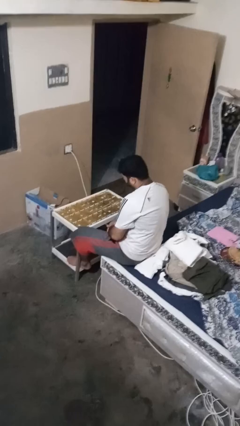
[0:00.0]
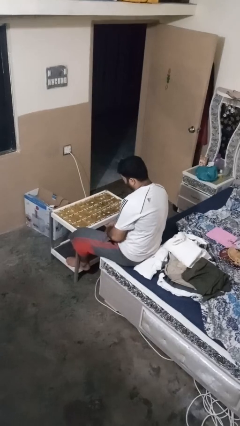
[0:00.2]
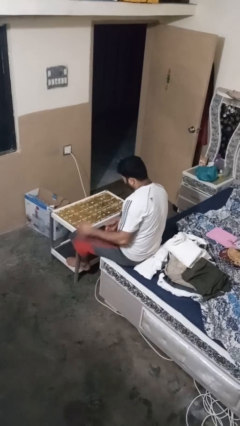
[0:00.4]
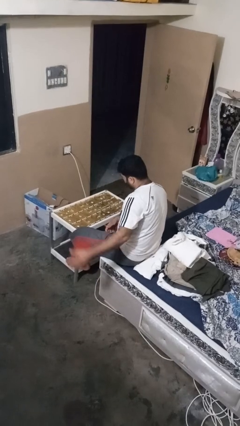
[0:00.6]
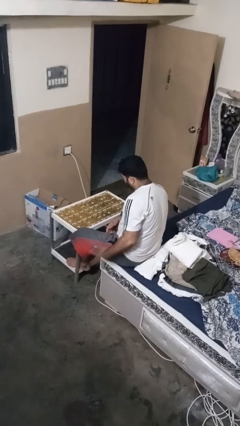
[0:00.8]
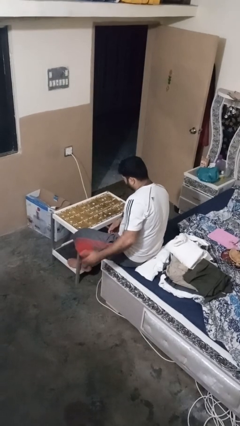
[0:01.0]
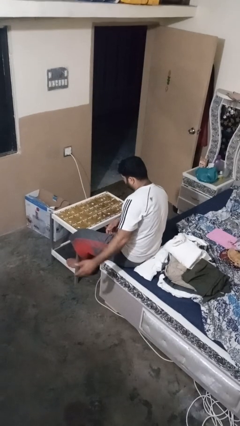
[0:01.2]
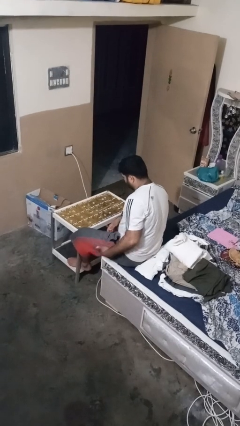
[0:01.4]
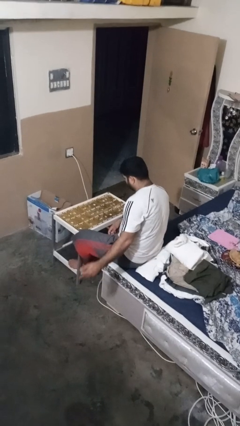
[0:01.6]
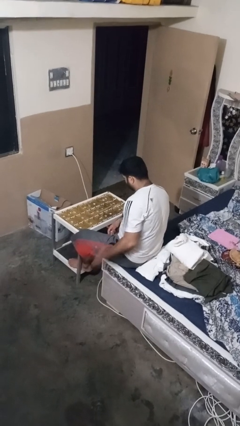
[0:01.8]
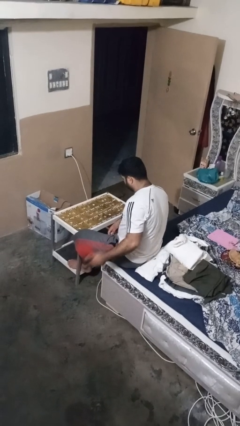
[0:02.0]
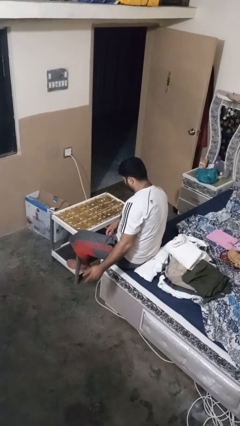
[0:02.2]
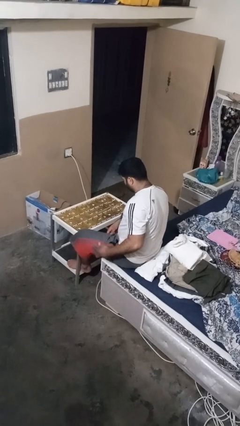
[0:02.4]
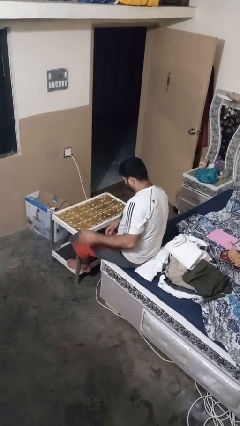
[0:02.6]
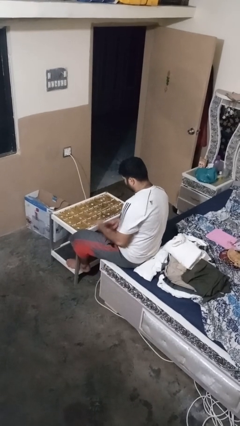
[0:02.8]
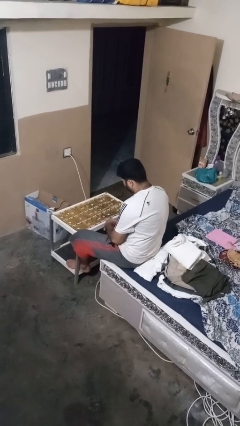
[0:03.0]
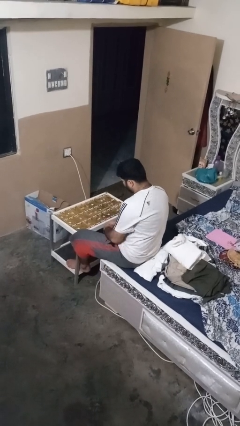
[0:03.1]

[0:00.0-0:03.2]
person slaps hands on thighs

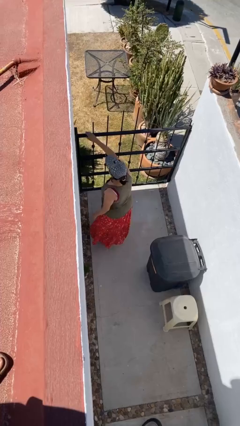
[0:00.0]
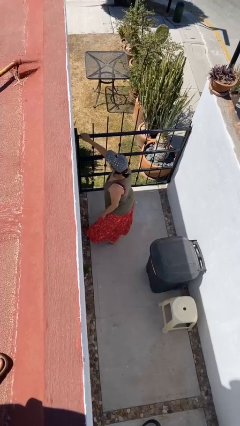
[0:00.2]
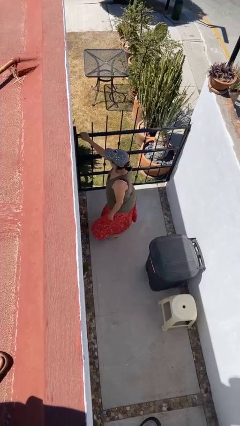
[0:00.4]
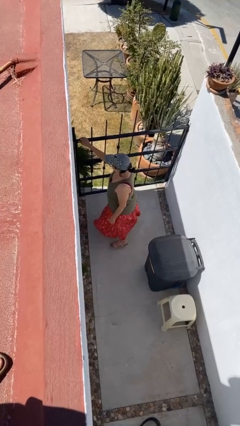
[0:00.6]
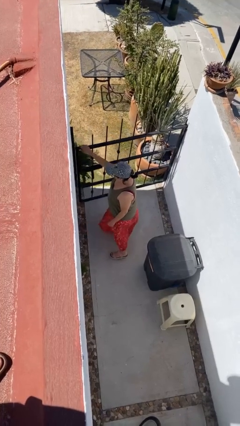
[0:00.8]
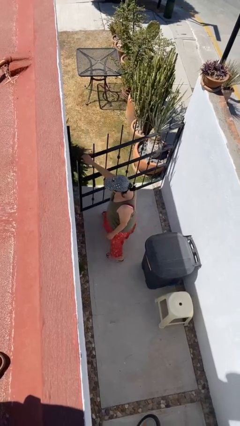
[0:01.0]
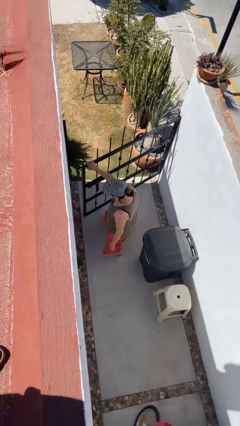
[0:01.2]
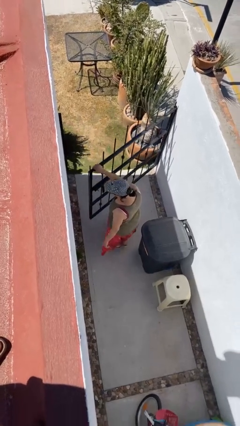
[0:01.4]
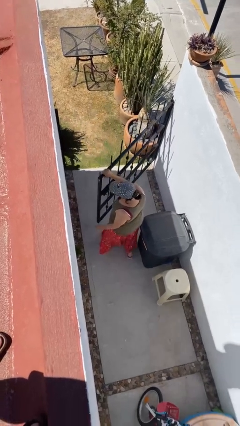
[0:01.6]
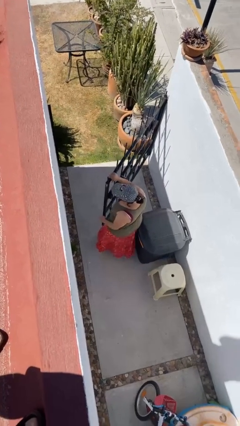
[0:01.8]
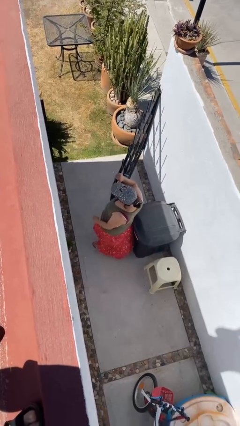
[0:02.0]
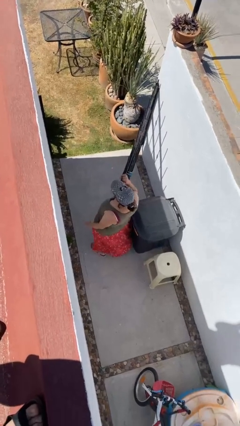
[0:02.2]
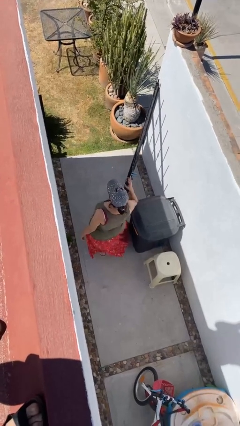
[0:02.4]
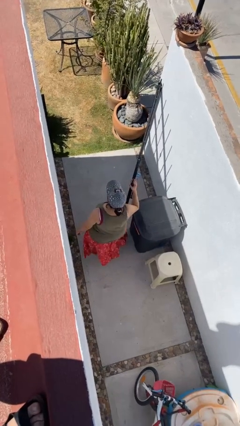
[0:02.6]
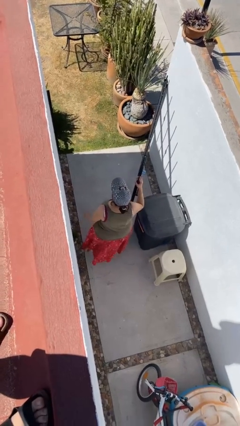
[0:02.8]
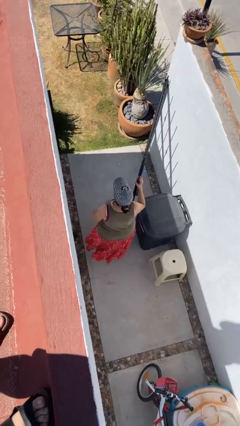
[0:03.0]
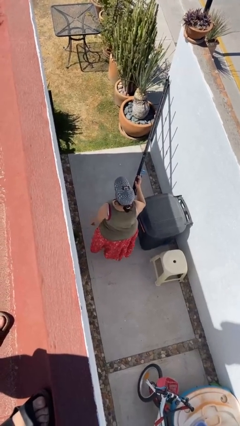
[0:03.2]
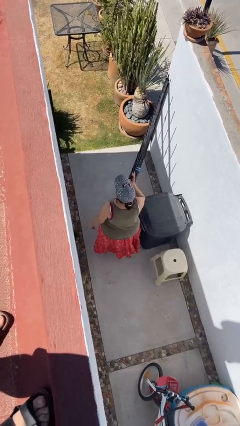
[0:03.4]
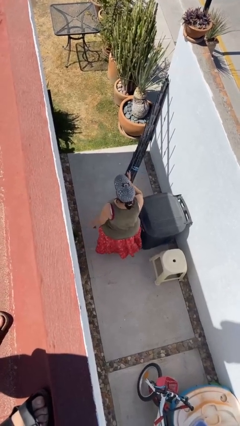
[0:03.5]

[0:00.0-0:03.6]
person opens facility door

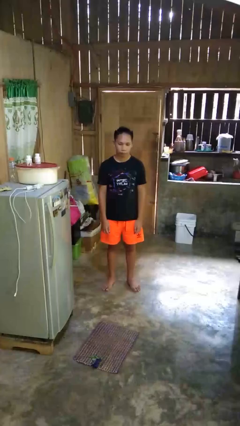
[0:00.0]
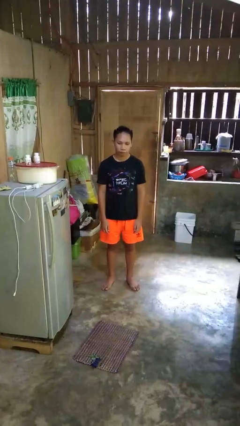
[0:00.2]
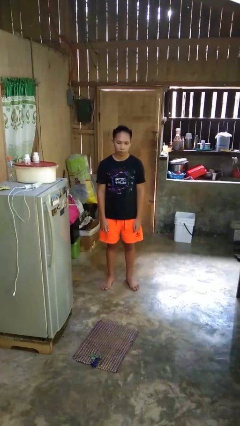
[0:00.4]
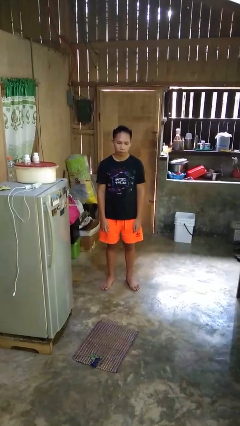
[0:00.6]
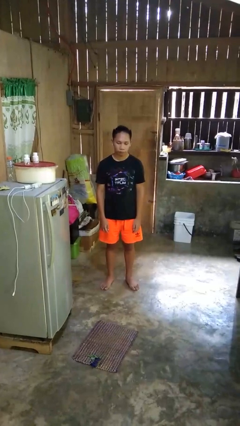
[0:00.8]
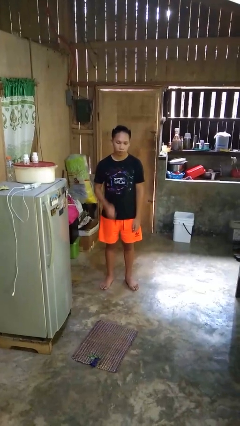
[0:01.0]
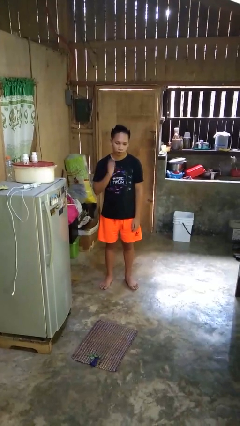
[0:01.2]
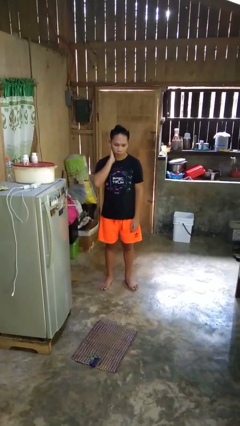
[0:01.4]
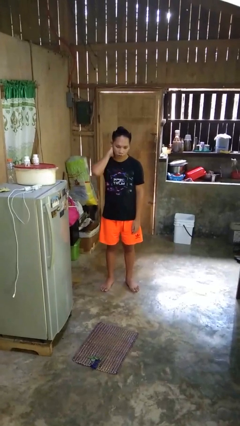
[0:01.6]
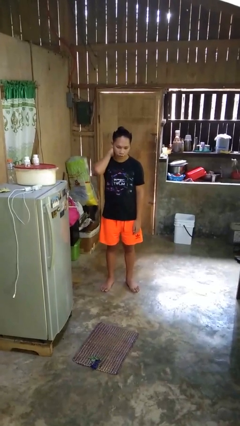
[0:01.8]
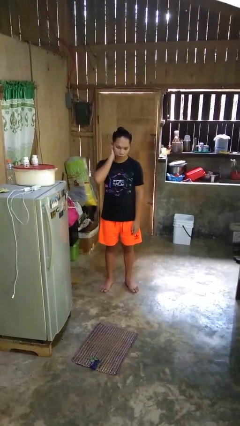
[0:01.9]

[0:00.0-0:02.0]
person rubs neck

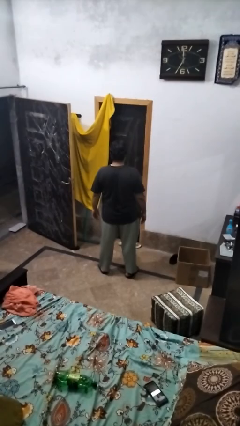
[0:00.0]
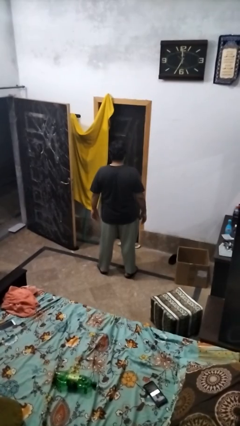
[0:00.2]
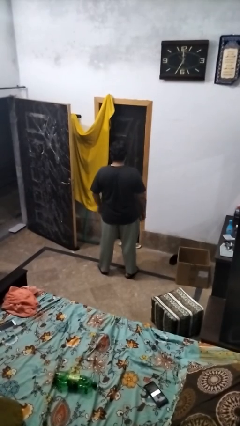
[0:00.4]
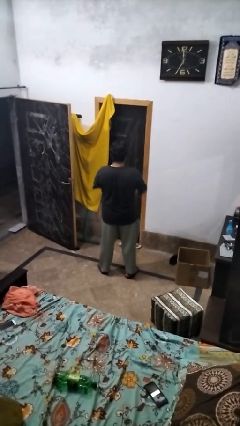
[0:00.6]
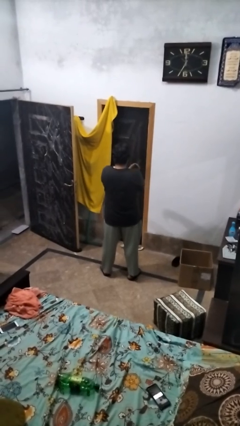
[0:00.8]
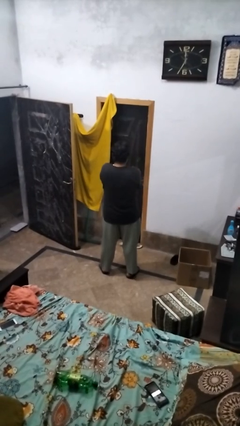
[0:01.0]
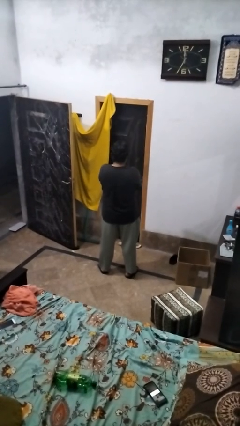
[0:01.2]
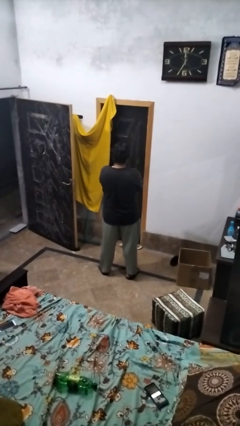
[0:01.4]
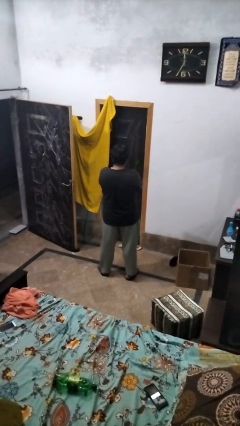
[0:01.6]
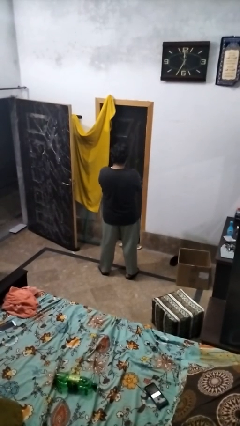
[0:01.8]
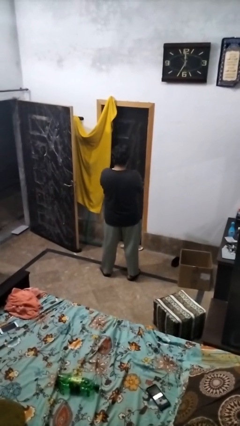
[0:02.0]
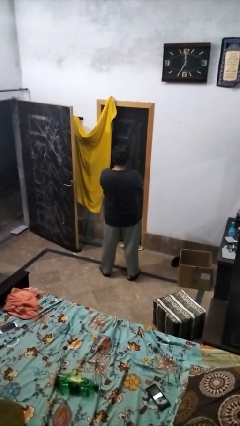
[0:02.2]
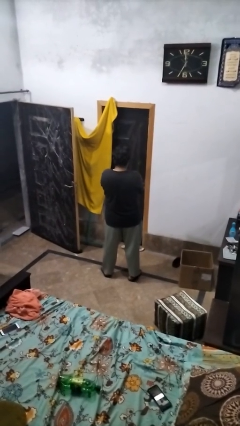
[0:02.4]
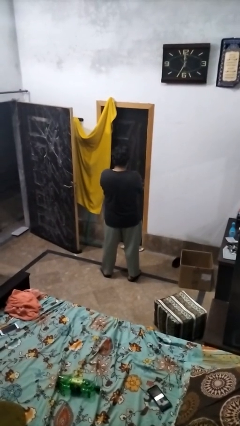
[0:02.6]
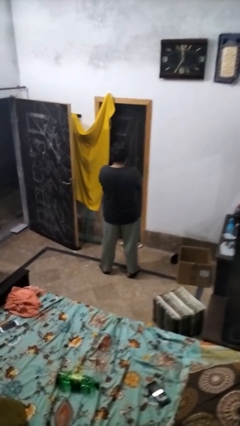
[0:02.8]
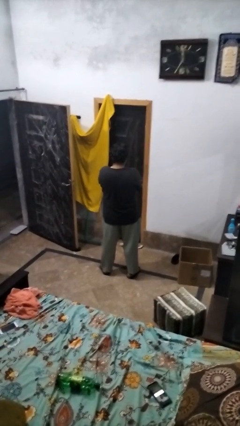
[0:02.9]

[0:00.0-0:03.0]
person gestures arms x

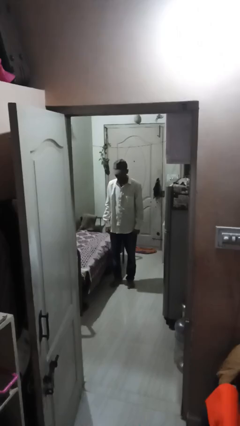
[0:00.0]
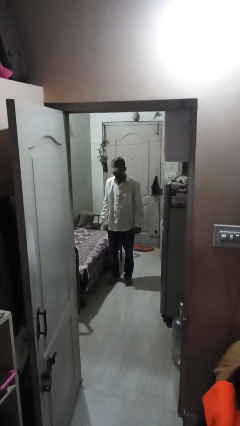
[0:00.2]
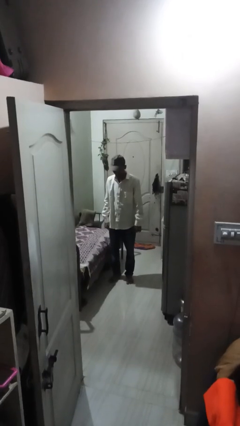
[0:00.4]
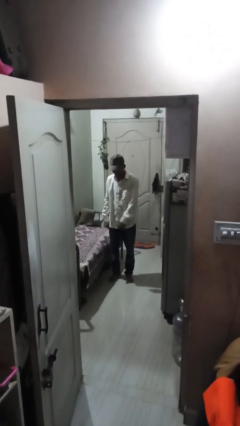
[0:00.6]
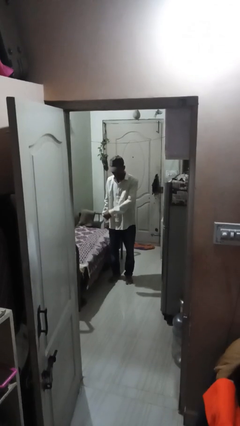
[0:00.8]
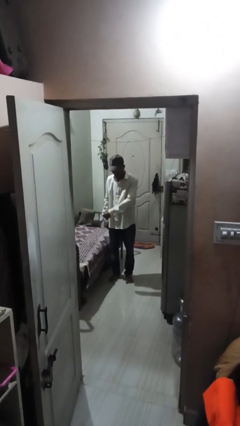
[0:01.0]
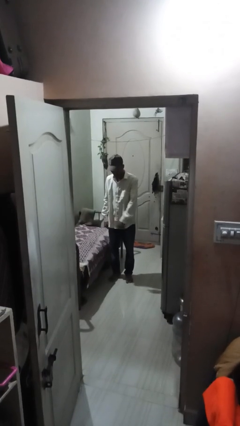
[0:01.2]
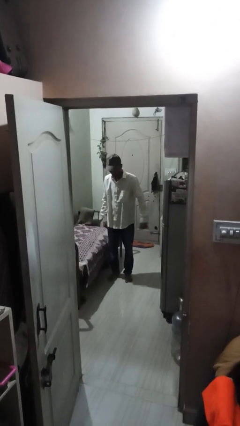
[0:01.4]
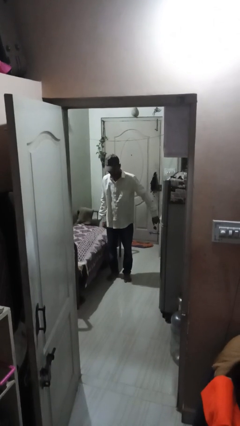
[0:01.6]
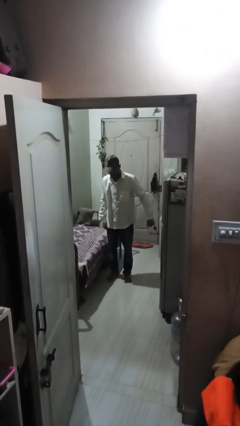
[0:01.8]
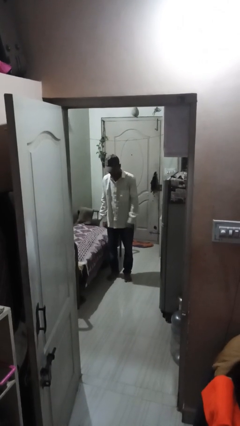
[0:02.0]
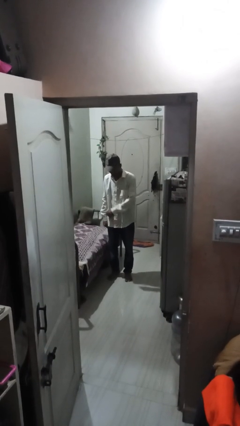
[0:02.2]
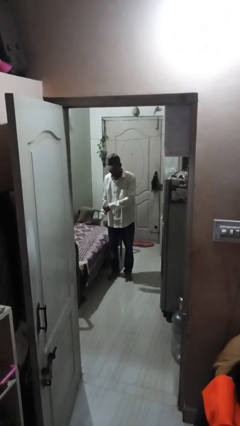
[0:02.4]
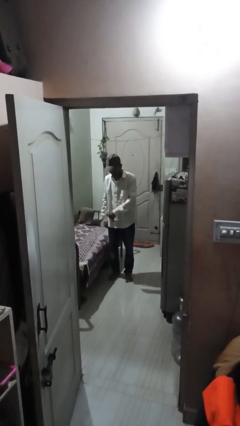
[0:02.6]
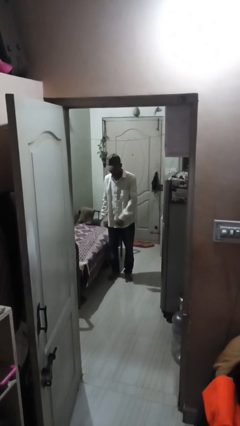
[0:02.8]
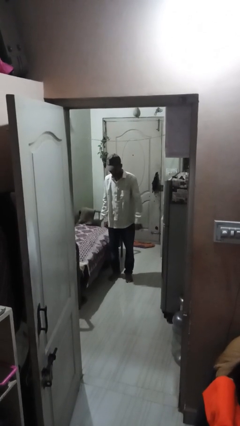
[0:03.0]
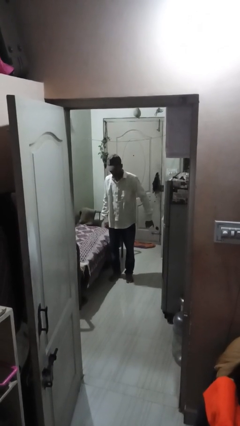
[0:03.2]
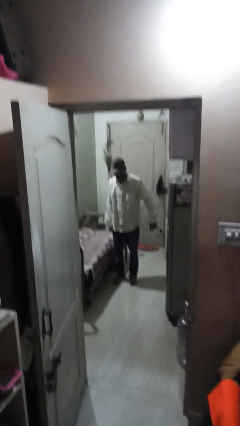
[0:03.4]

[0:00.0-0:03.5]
person gestures hang loose

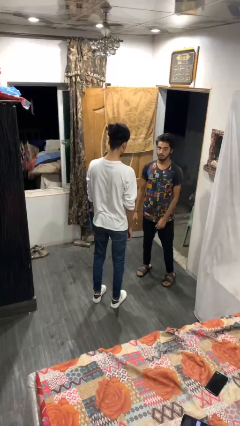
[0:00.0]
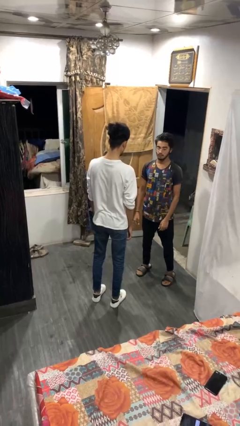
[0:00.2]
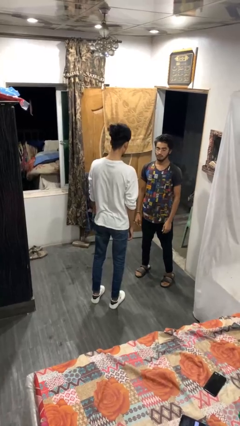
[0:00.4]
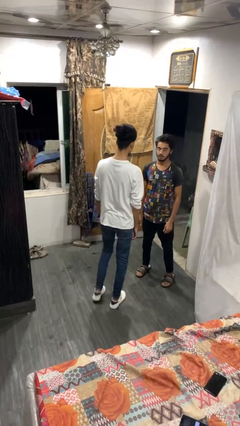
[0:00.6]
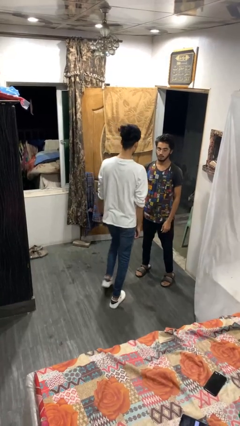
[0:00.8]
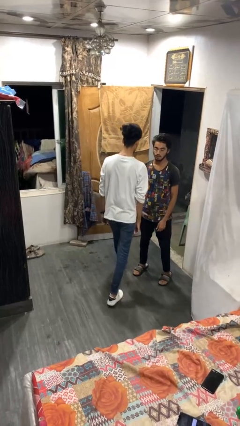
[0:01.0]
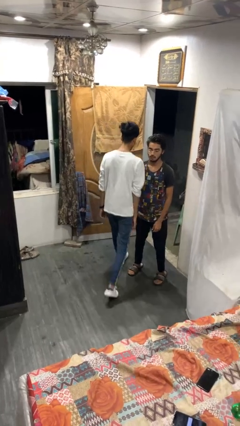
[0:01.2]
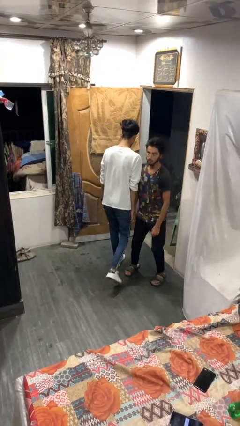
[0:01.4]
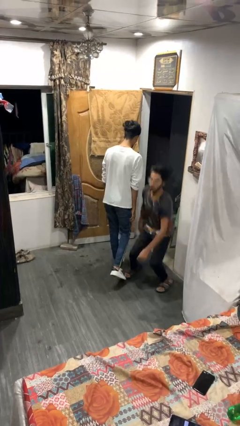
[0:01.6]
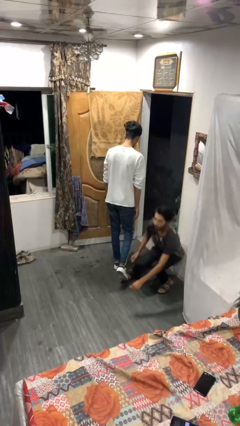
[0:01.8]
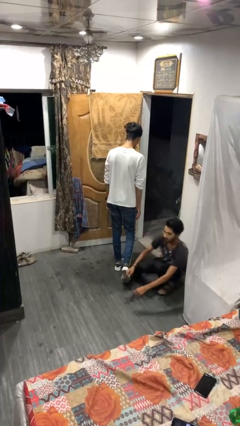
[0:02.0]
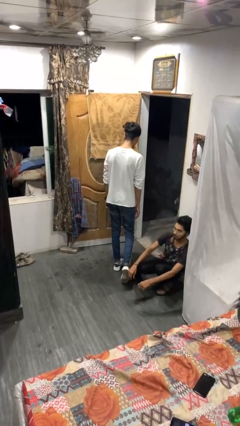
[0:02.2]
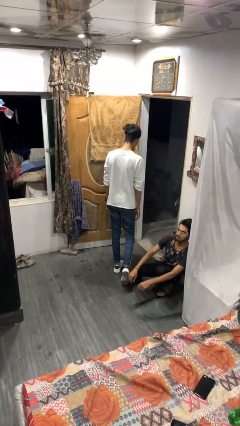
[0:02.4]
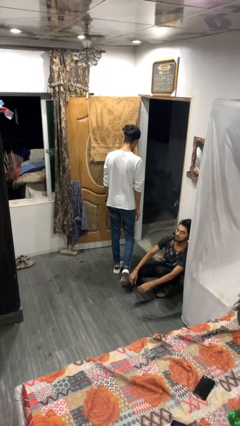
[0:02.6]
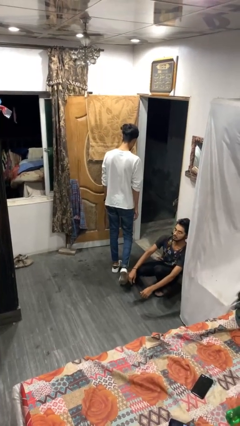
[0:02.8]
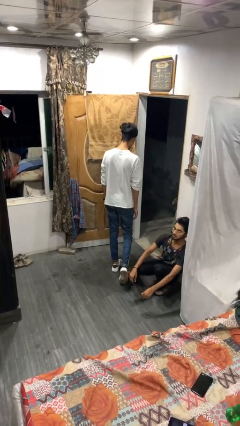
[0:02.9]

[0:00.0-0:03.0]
person bumps into person
